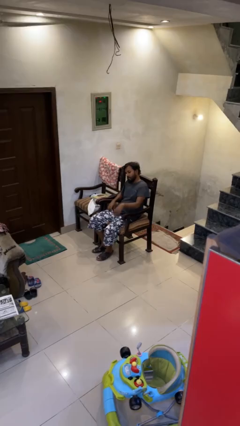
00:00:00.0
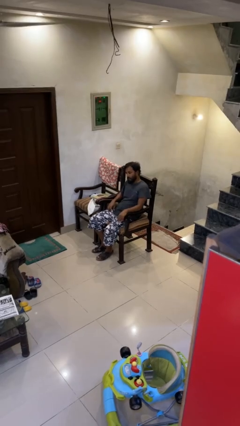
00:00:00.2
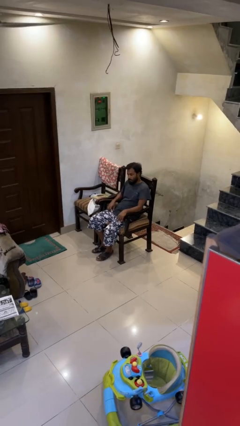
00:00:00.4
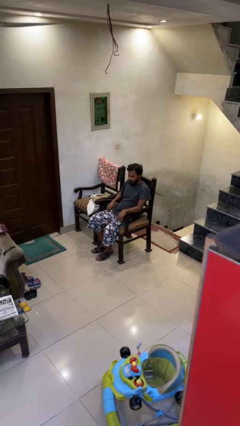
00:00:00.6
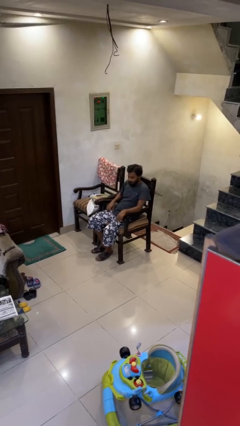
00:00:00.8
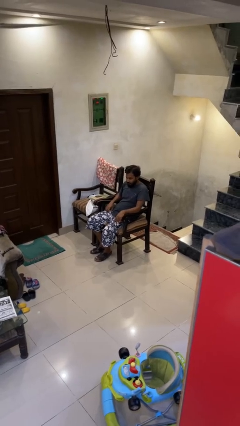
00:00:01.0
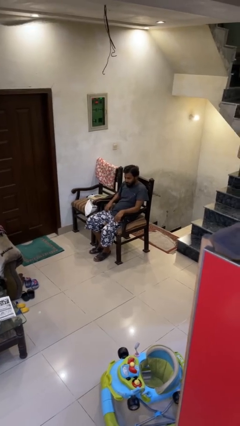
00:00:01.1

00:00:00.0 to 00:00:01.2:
person gestures peace

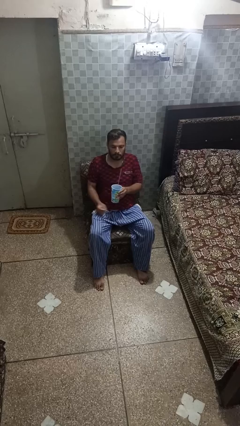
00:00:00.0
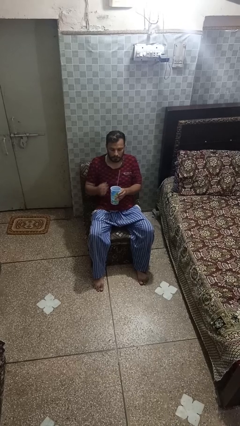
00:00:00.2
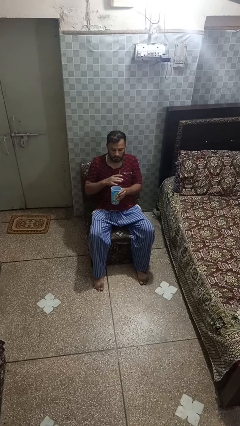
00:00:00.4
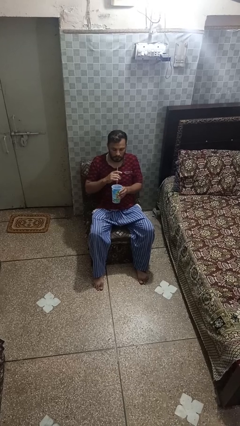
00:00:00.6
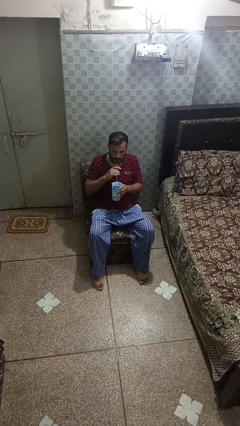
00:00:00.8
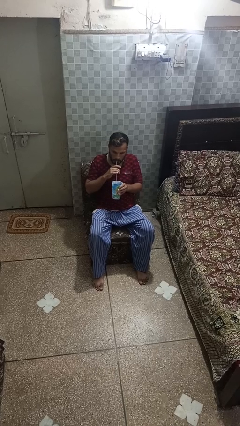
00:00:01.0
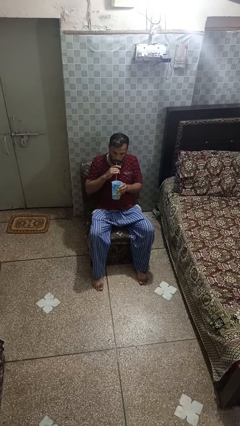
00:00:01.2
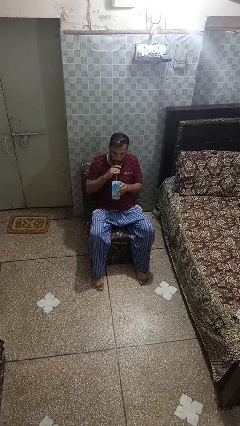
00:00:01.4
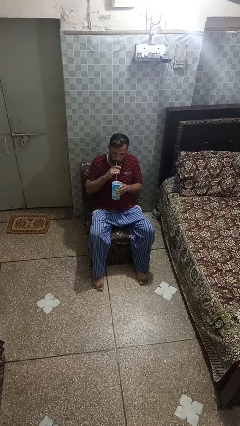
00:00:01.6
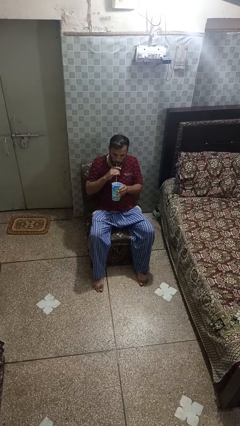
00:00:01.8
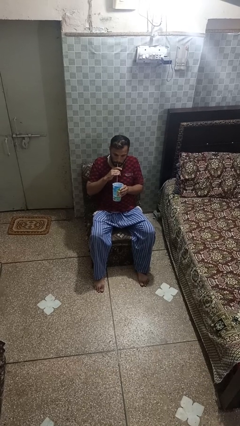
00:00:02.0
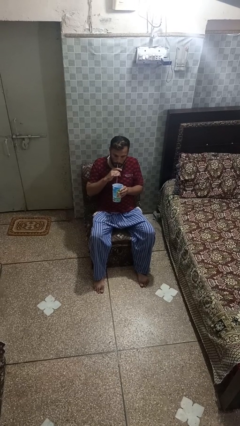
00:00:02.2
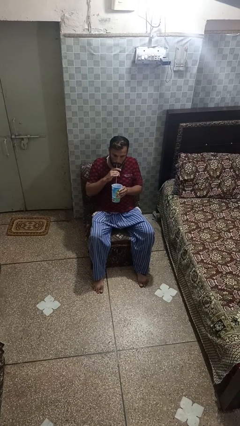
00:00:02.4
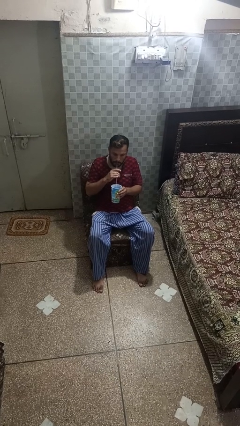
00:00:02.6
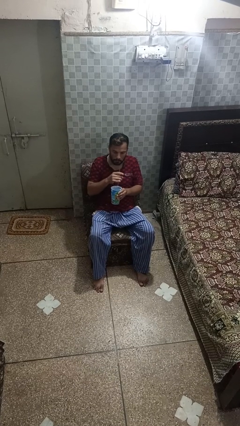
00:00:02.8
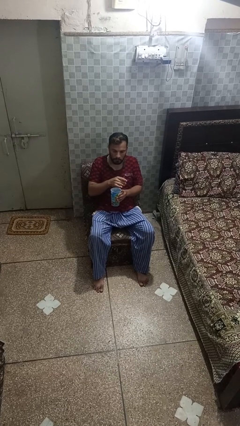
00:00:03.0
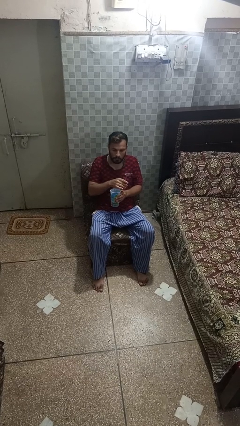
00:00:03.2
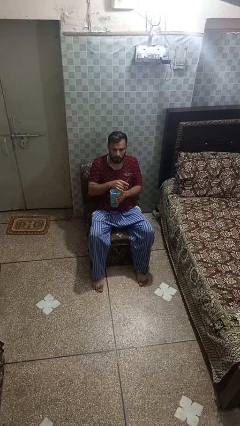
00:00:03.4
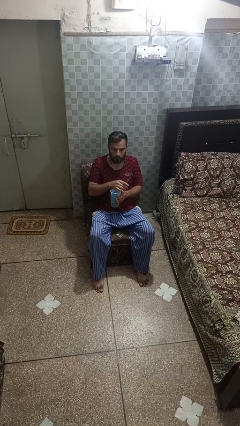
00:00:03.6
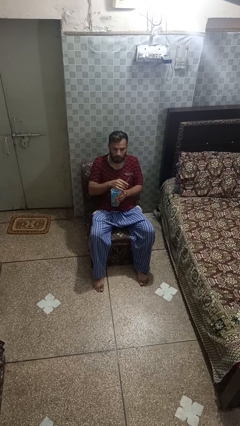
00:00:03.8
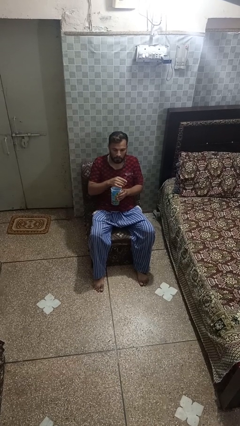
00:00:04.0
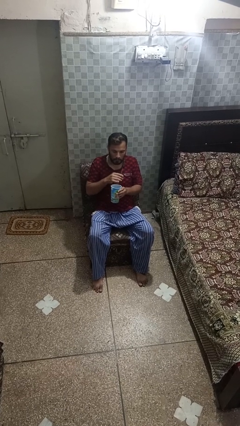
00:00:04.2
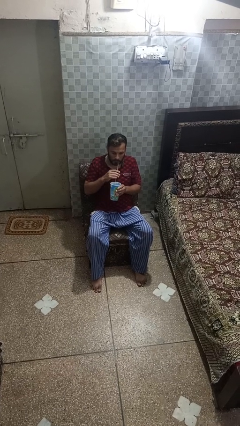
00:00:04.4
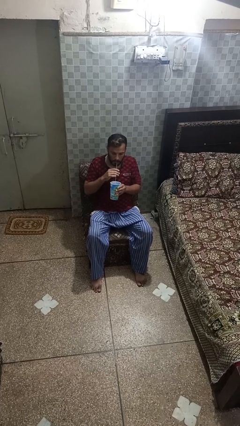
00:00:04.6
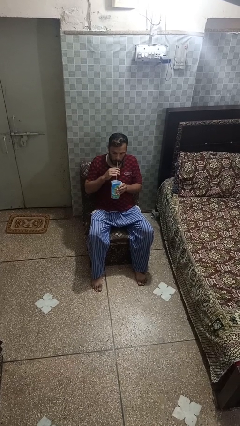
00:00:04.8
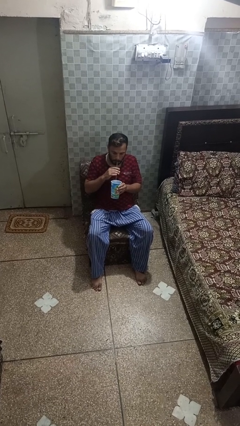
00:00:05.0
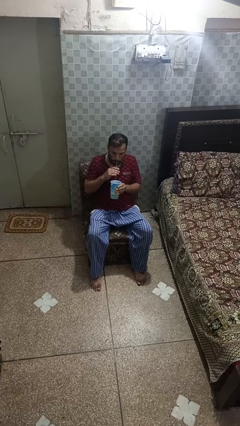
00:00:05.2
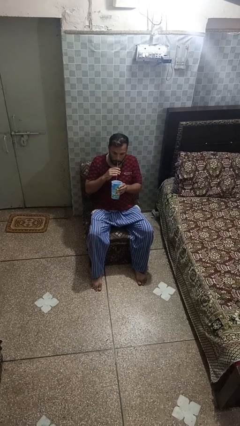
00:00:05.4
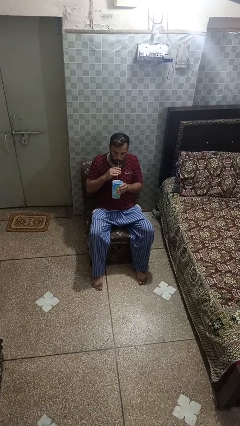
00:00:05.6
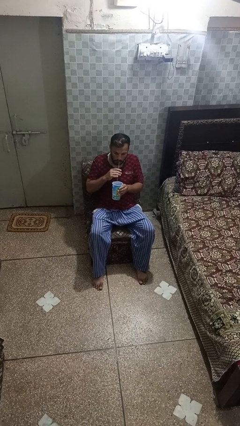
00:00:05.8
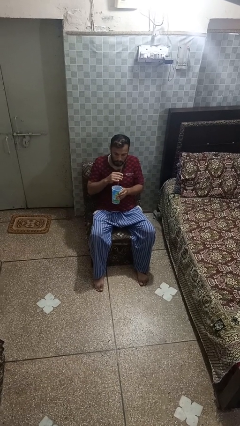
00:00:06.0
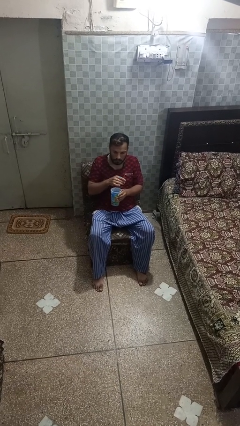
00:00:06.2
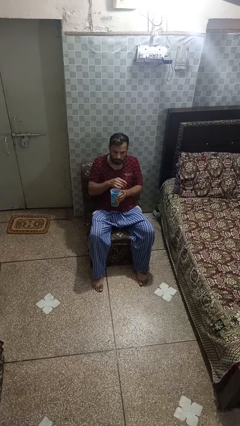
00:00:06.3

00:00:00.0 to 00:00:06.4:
person drinks from straw

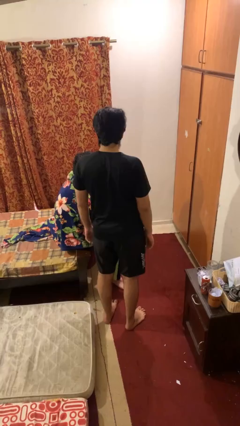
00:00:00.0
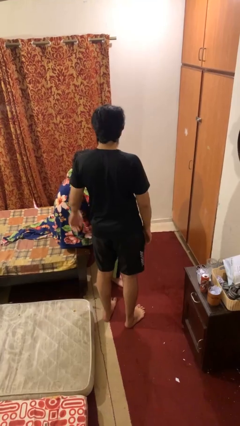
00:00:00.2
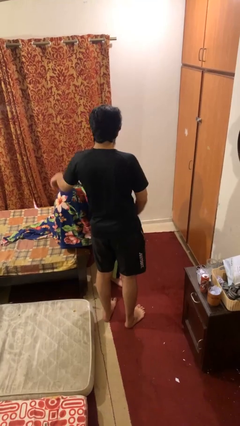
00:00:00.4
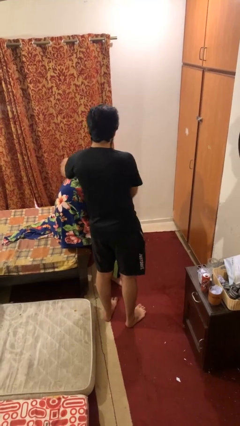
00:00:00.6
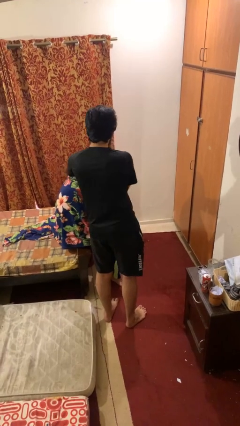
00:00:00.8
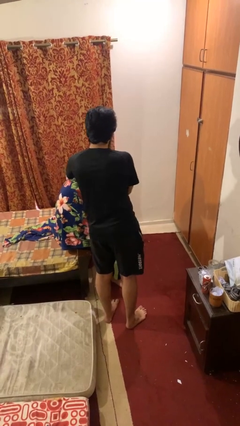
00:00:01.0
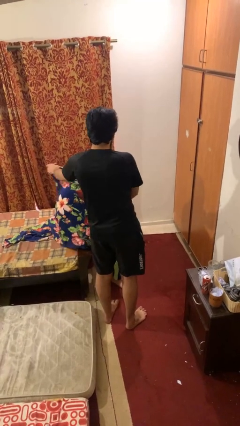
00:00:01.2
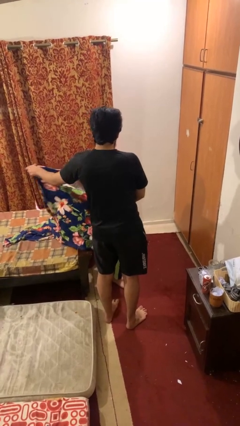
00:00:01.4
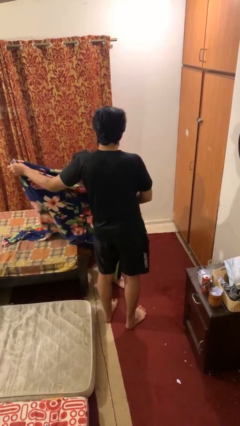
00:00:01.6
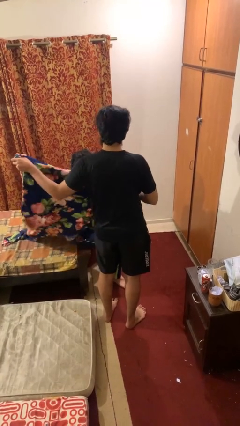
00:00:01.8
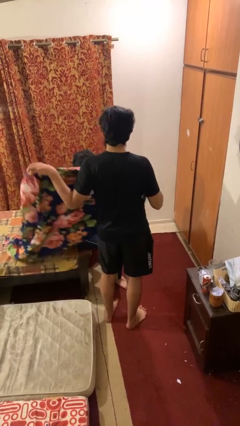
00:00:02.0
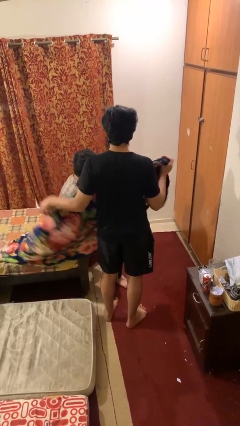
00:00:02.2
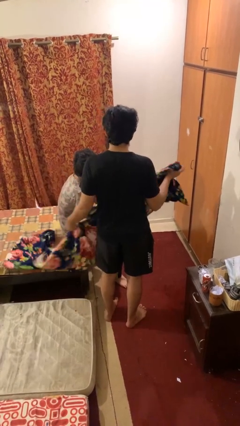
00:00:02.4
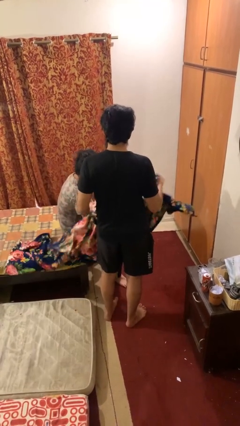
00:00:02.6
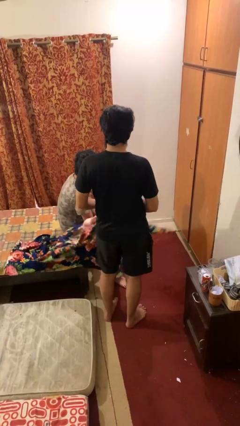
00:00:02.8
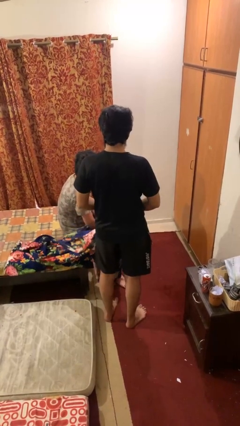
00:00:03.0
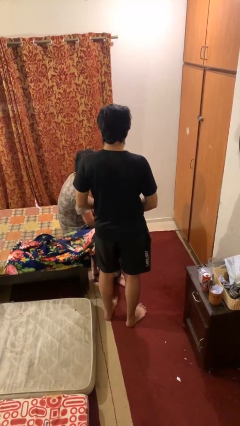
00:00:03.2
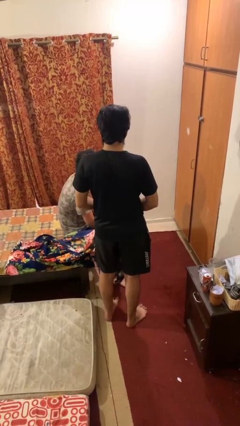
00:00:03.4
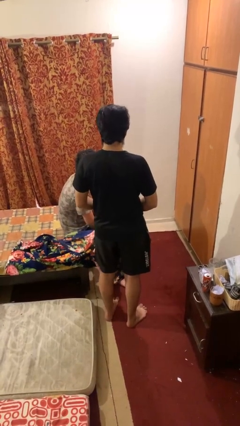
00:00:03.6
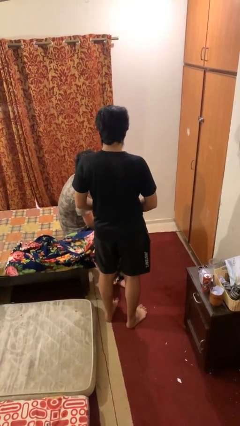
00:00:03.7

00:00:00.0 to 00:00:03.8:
person uncovers friend with blanket

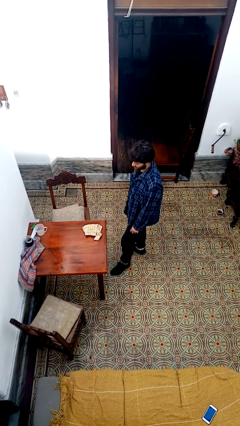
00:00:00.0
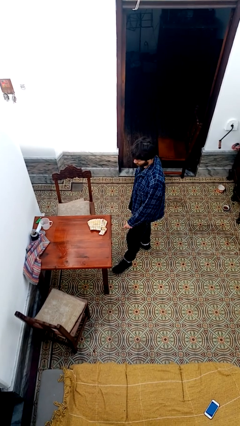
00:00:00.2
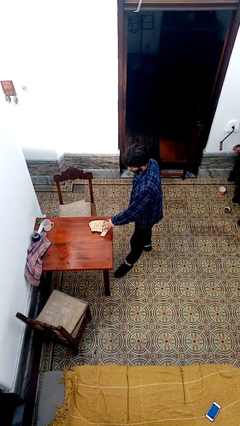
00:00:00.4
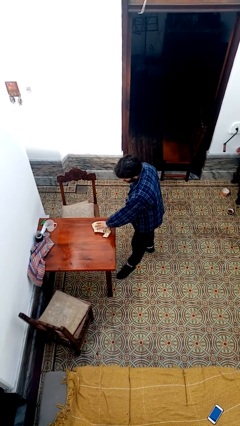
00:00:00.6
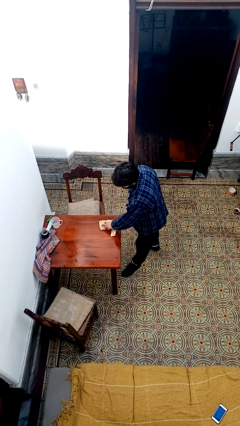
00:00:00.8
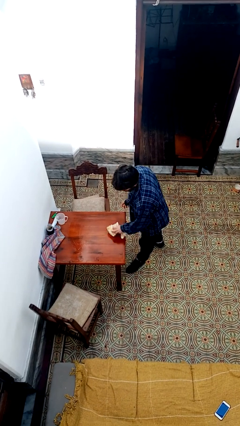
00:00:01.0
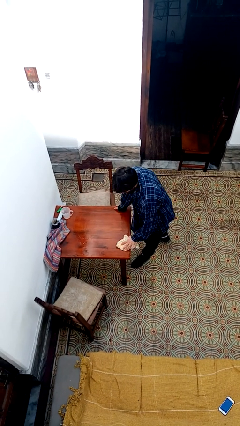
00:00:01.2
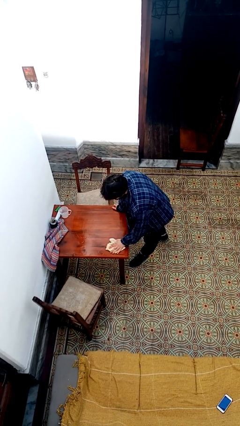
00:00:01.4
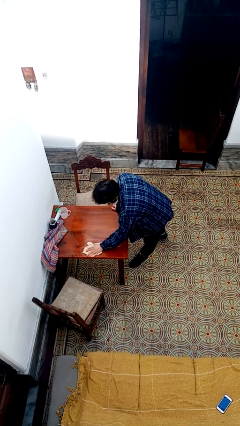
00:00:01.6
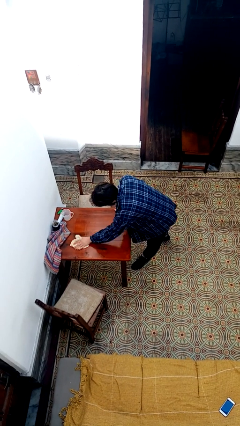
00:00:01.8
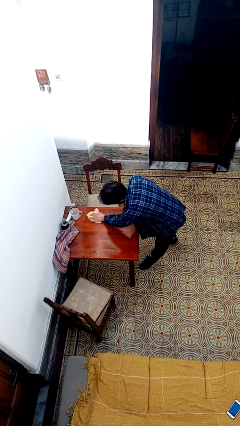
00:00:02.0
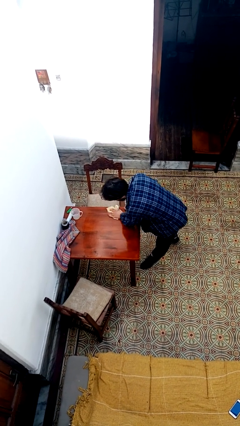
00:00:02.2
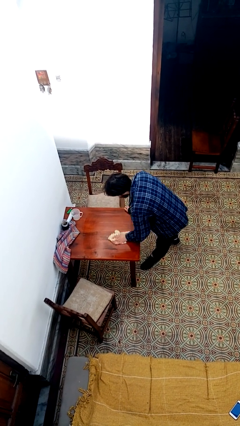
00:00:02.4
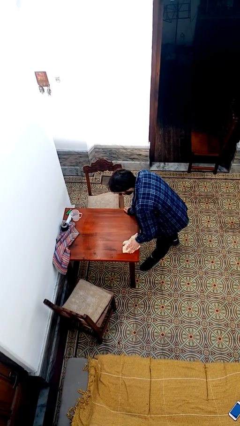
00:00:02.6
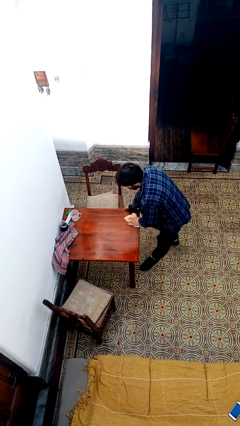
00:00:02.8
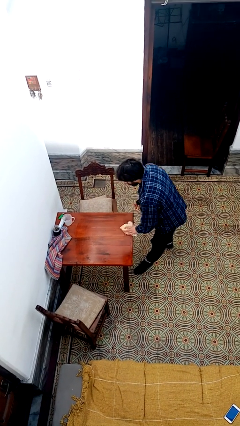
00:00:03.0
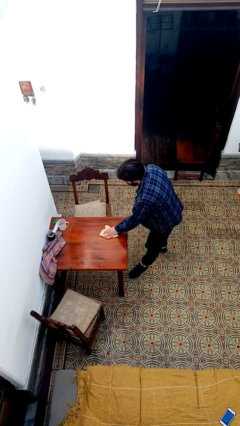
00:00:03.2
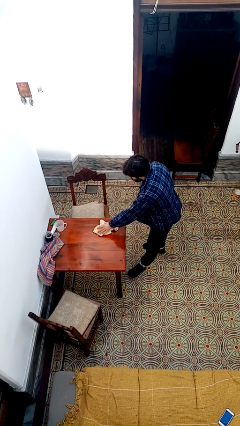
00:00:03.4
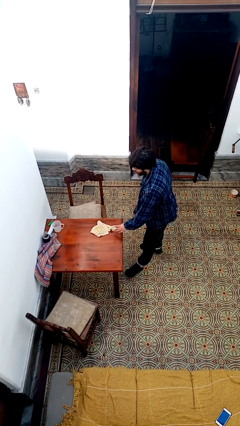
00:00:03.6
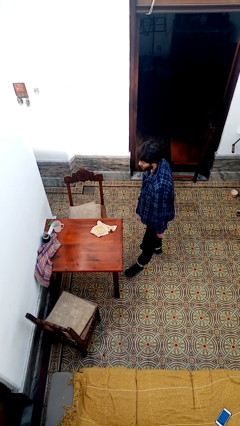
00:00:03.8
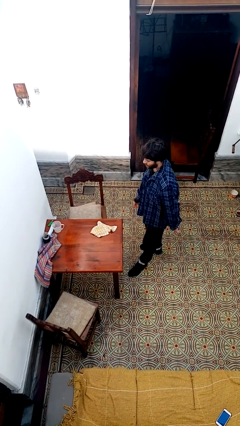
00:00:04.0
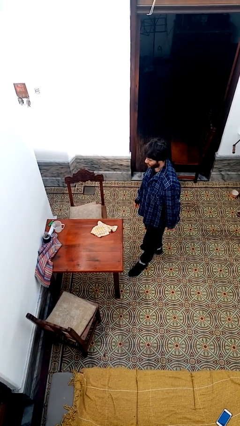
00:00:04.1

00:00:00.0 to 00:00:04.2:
person cleans table with rag

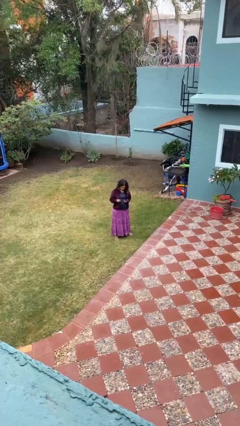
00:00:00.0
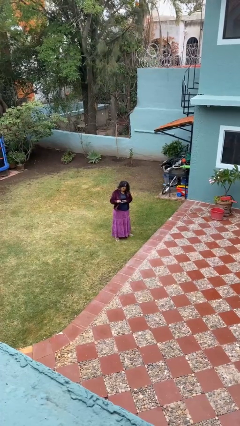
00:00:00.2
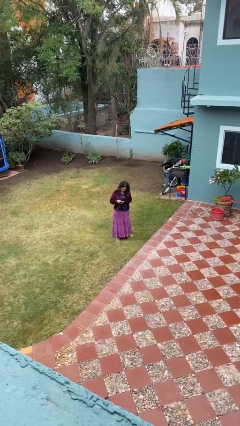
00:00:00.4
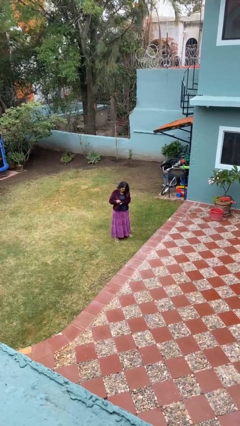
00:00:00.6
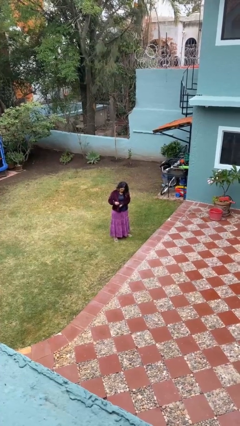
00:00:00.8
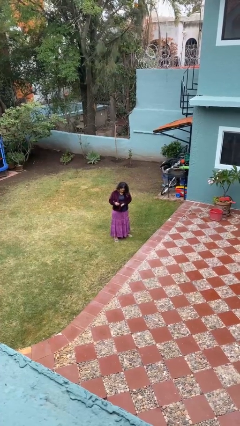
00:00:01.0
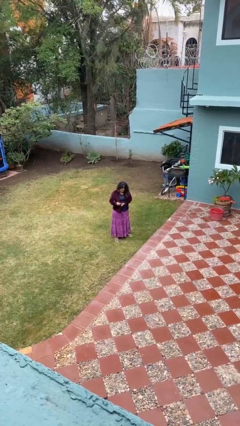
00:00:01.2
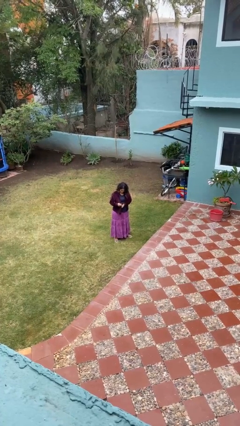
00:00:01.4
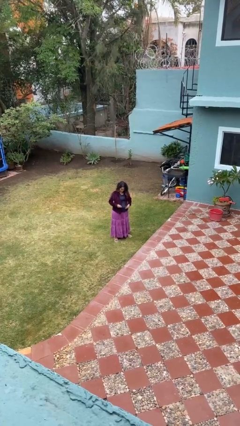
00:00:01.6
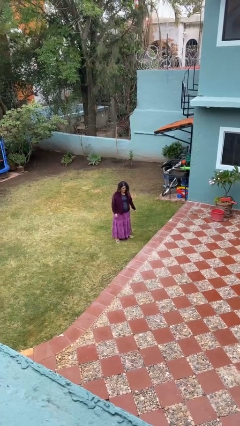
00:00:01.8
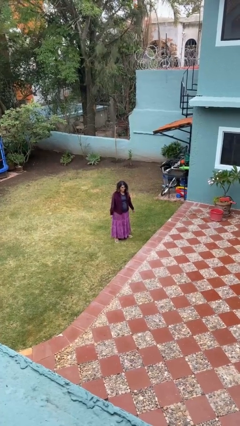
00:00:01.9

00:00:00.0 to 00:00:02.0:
person puts phone into pocket
